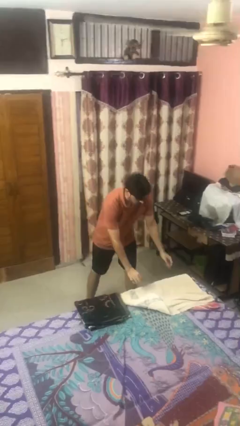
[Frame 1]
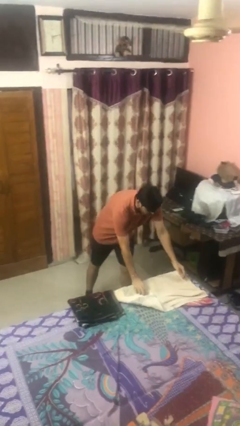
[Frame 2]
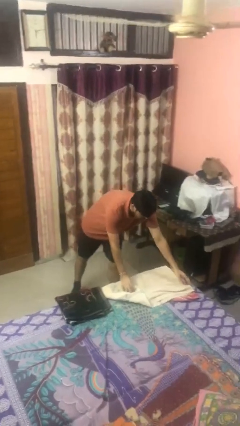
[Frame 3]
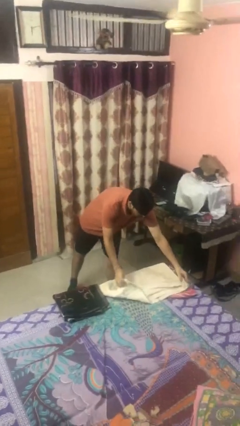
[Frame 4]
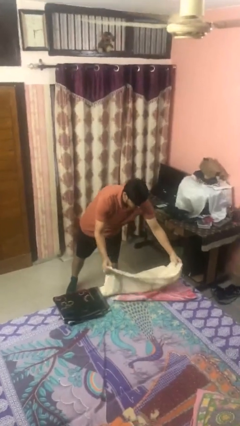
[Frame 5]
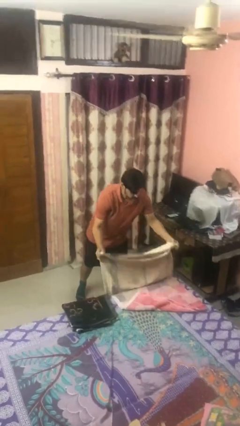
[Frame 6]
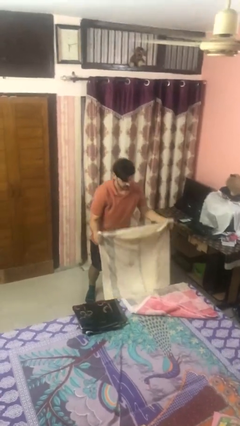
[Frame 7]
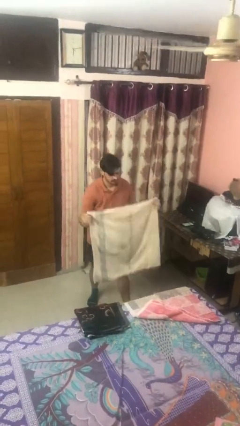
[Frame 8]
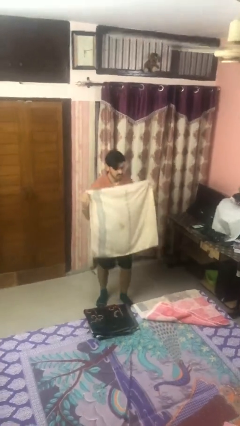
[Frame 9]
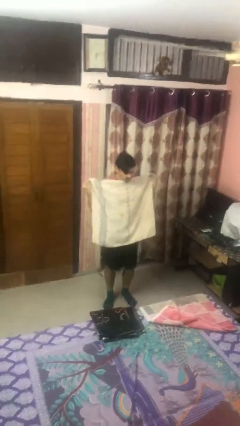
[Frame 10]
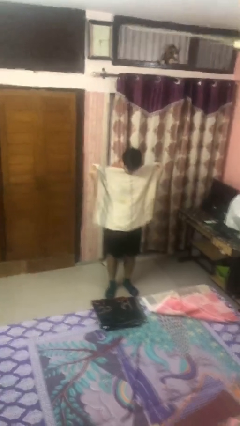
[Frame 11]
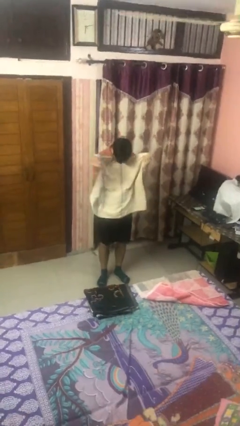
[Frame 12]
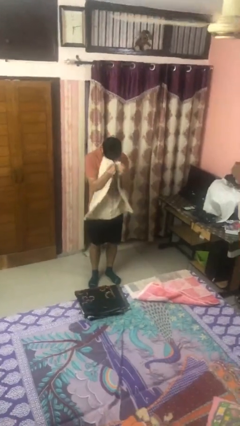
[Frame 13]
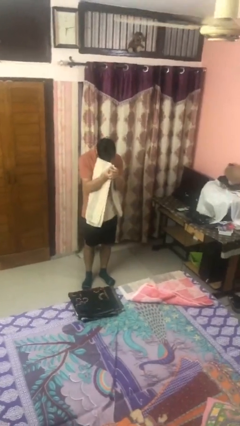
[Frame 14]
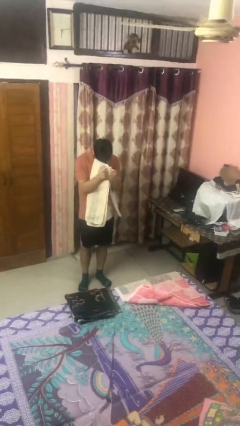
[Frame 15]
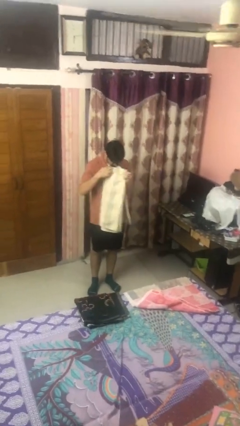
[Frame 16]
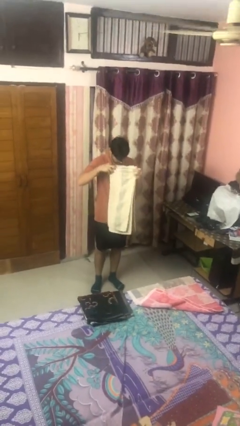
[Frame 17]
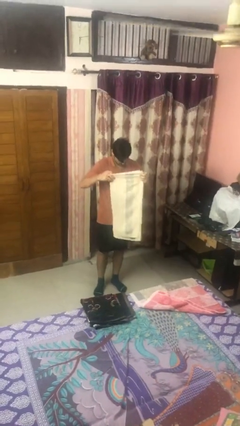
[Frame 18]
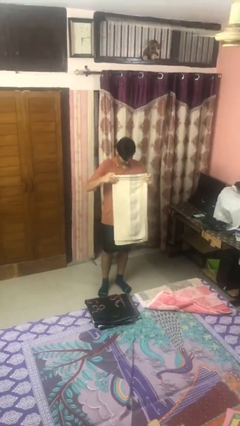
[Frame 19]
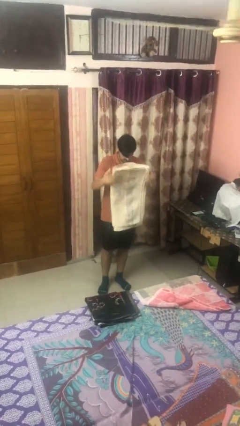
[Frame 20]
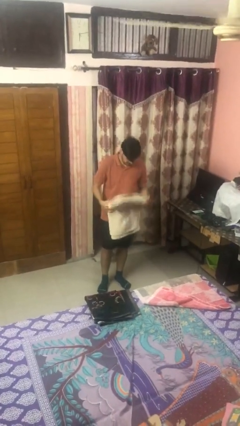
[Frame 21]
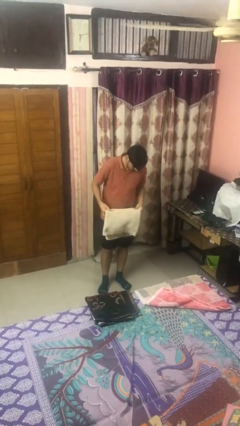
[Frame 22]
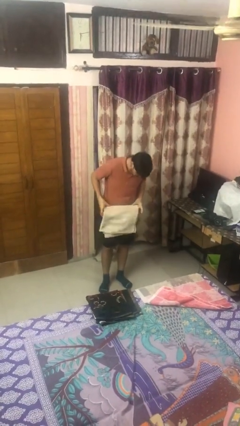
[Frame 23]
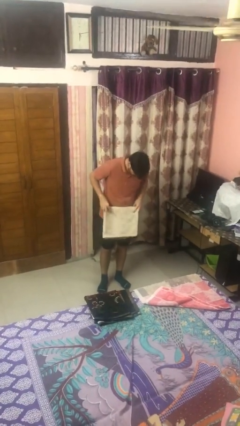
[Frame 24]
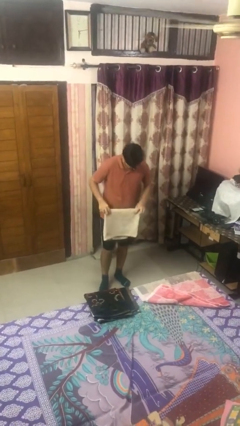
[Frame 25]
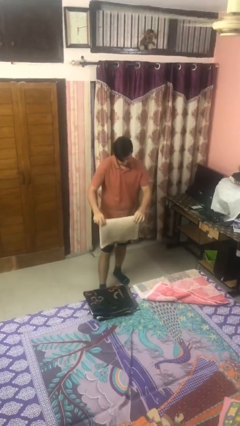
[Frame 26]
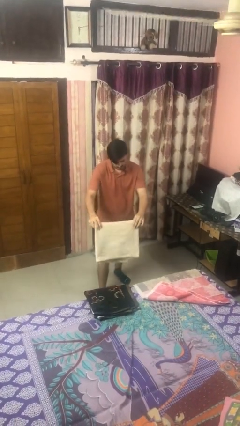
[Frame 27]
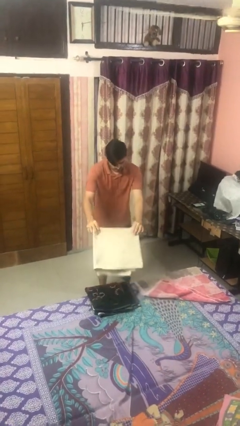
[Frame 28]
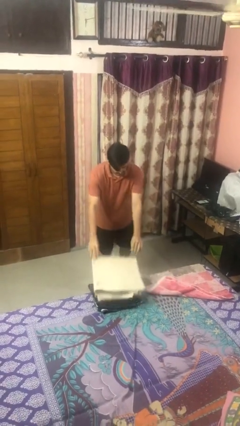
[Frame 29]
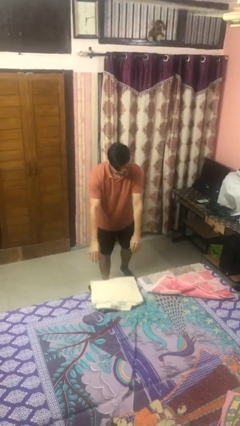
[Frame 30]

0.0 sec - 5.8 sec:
person folds towel

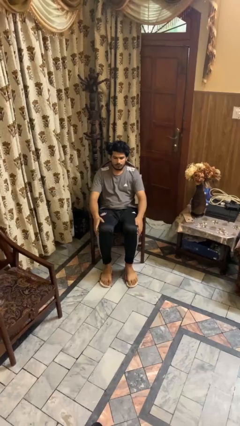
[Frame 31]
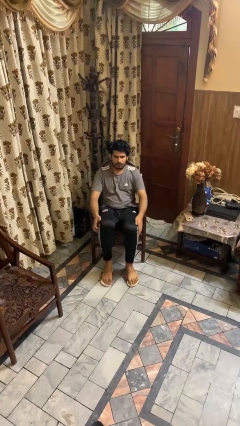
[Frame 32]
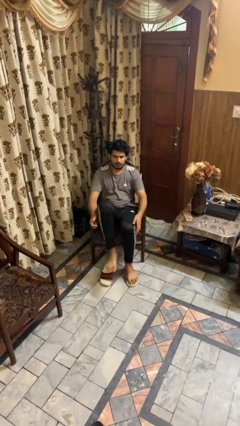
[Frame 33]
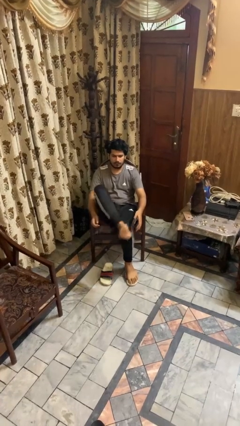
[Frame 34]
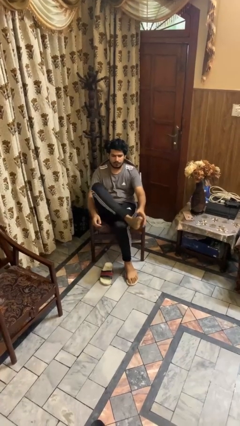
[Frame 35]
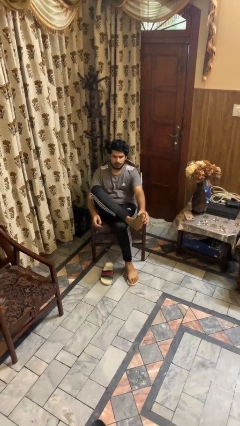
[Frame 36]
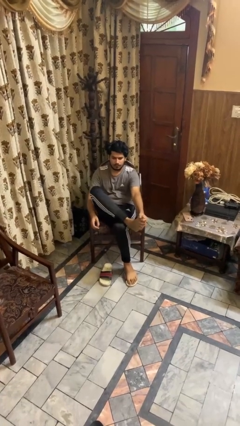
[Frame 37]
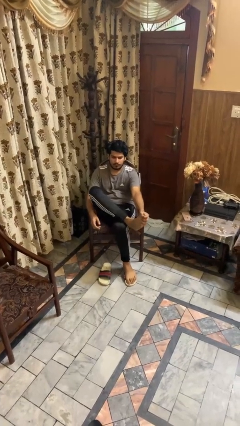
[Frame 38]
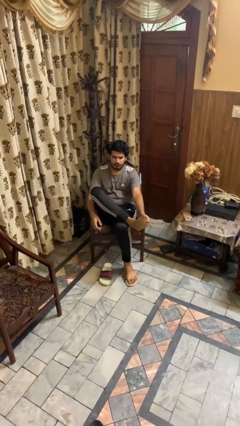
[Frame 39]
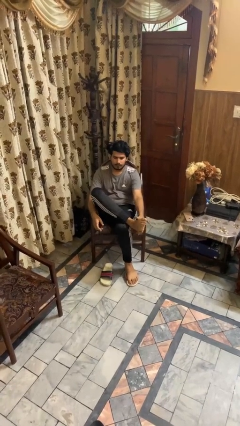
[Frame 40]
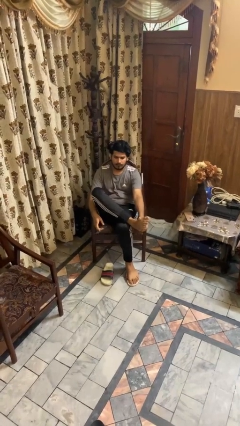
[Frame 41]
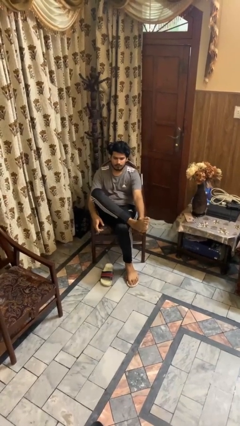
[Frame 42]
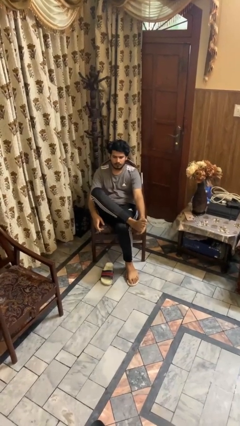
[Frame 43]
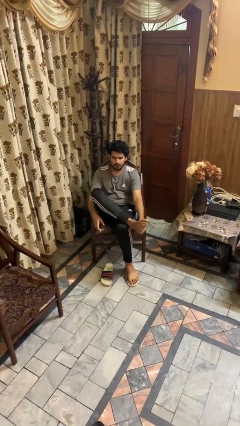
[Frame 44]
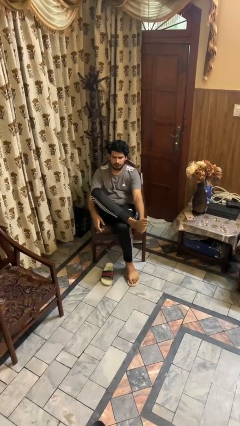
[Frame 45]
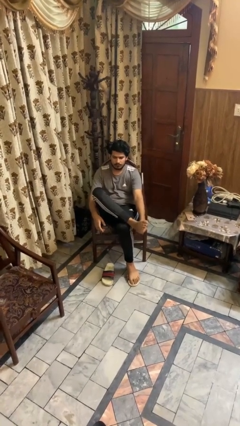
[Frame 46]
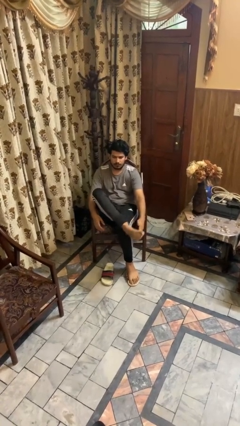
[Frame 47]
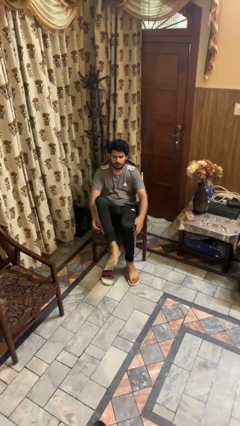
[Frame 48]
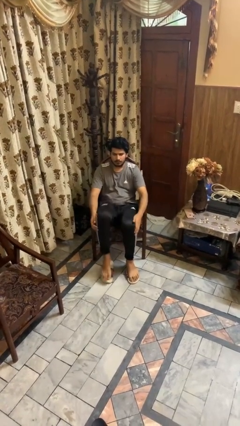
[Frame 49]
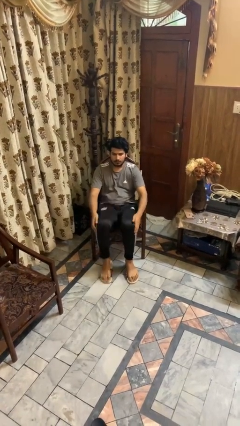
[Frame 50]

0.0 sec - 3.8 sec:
person rubs foot

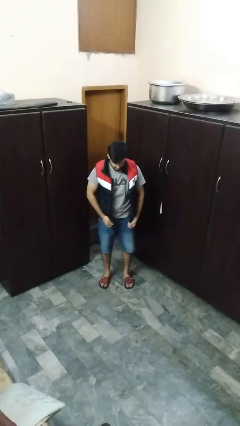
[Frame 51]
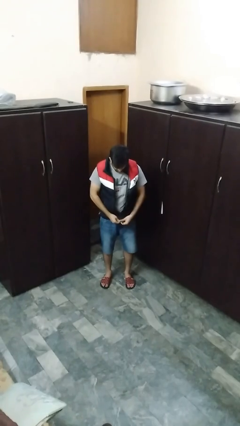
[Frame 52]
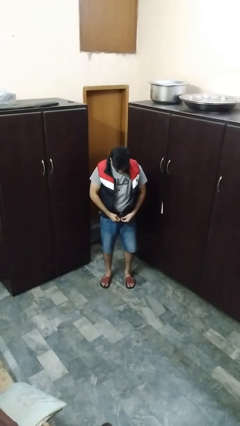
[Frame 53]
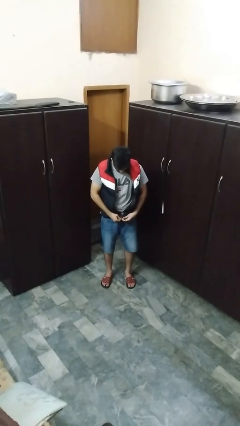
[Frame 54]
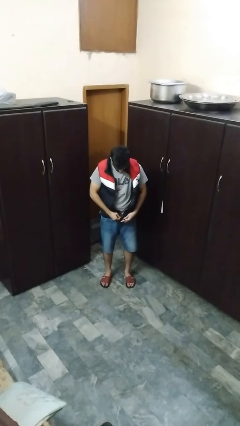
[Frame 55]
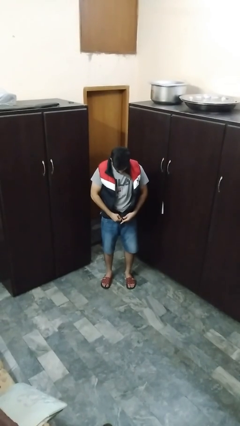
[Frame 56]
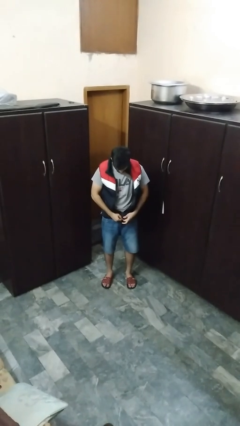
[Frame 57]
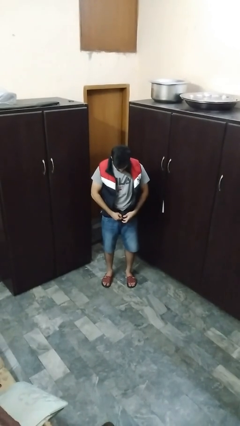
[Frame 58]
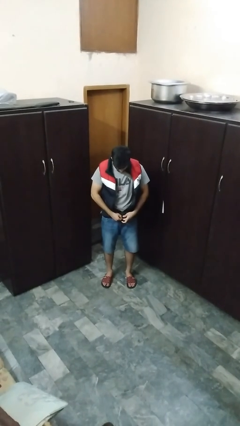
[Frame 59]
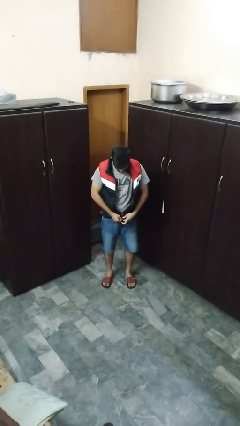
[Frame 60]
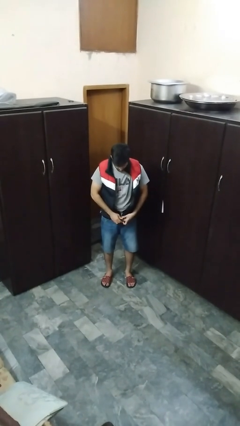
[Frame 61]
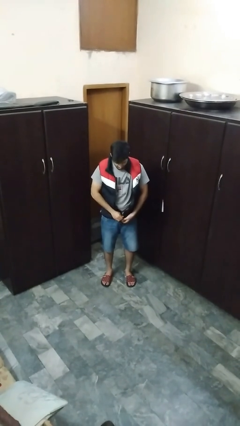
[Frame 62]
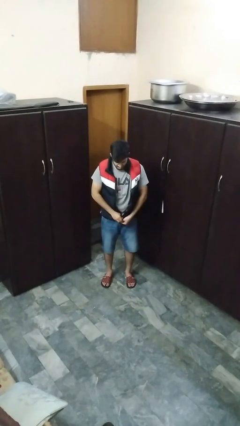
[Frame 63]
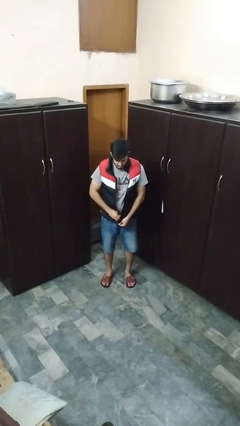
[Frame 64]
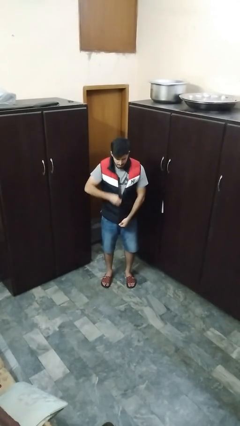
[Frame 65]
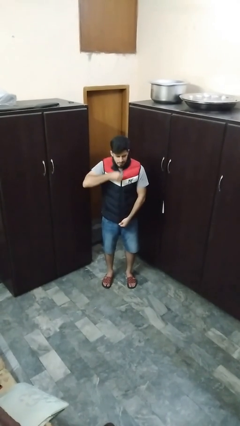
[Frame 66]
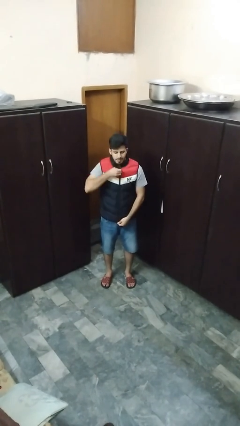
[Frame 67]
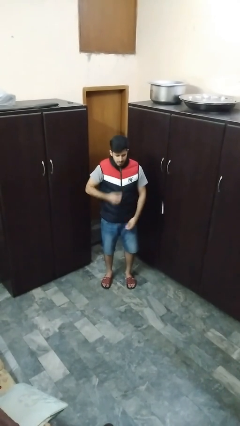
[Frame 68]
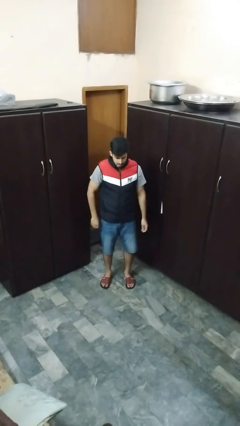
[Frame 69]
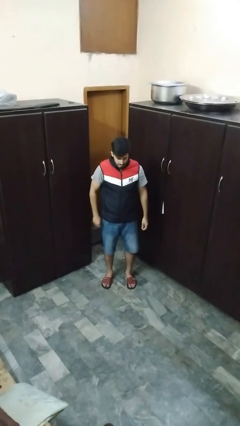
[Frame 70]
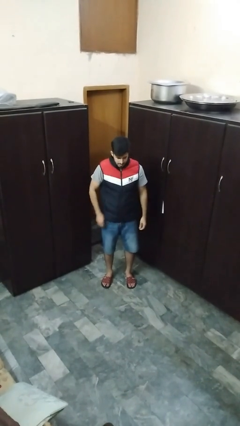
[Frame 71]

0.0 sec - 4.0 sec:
person zips up jacket

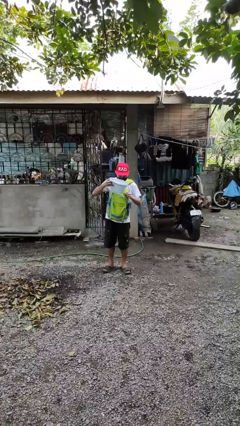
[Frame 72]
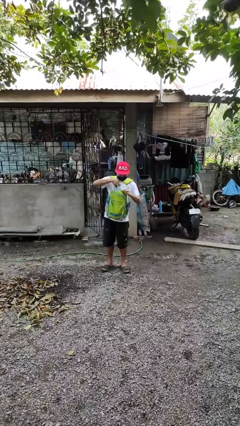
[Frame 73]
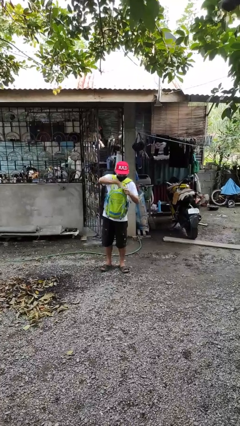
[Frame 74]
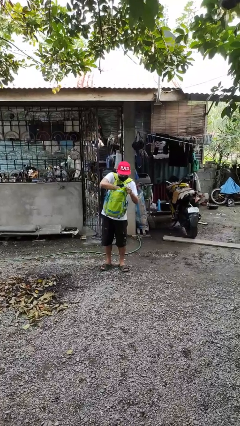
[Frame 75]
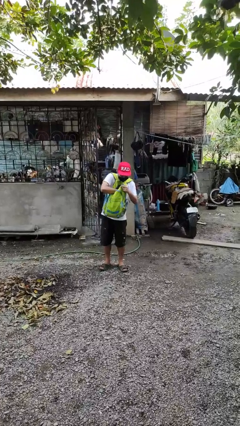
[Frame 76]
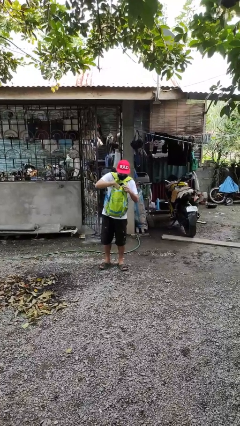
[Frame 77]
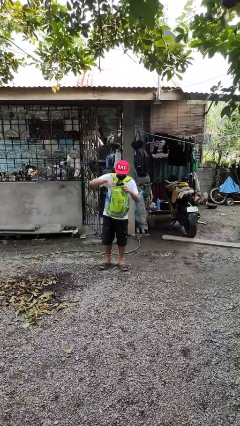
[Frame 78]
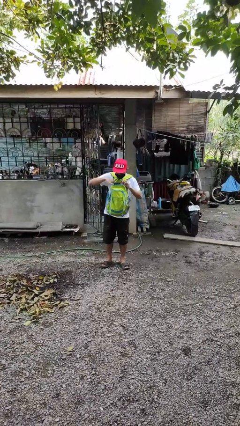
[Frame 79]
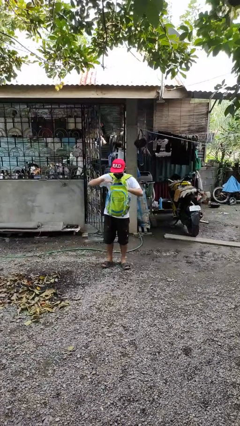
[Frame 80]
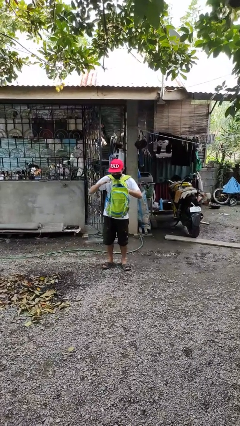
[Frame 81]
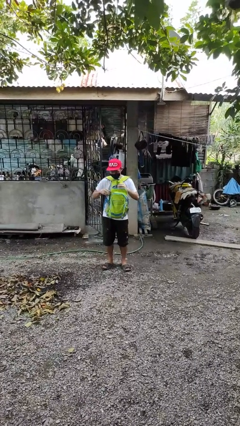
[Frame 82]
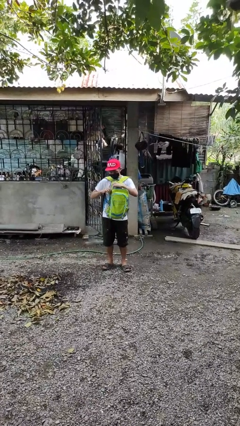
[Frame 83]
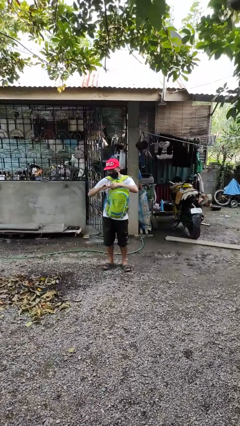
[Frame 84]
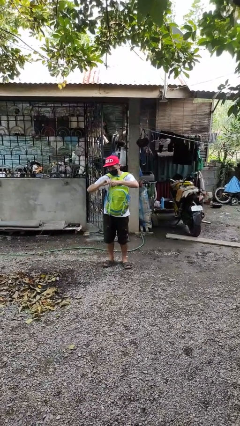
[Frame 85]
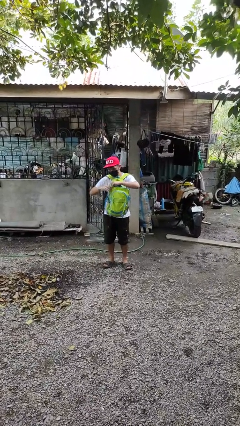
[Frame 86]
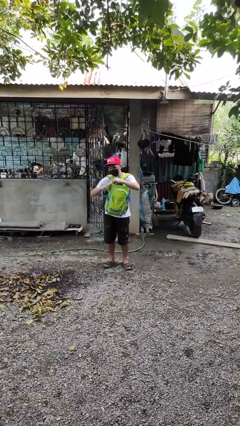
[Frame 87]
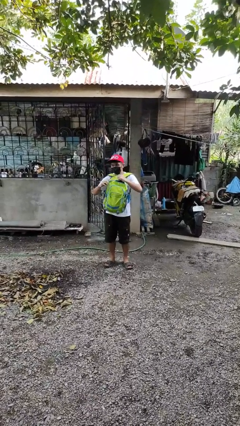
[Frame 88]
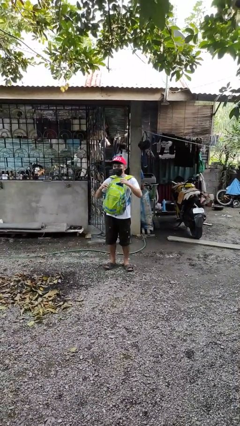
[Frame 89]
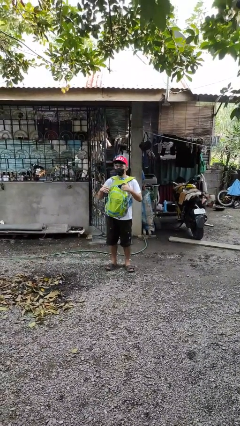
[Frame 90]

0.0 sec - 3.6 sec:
person puts object into backpack

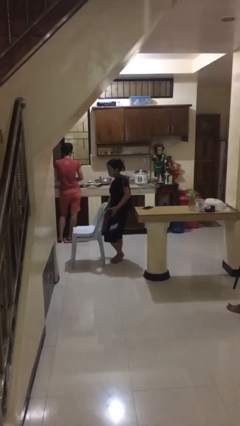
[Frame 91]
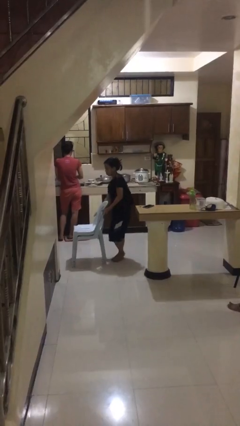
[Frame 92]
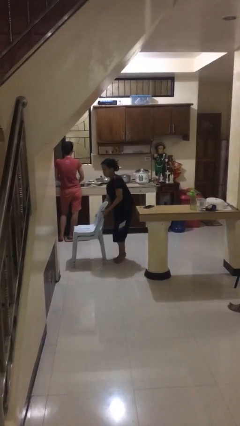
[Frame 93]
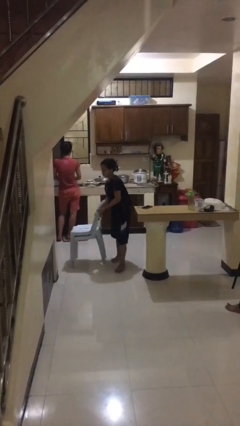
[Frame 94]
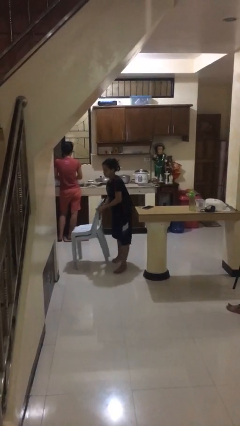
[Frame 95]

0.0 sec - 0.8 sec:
person picks up object from floor
